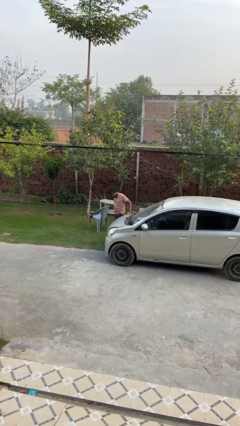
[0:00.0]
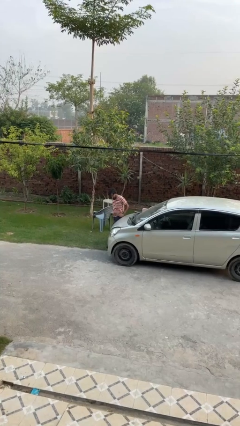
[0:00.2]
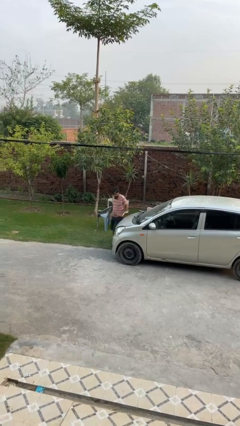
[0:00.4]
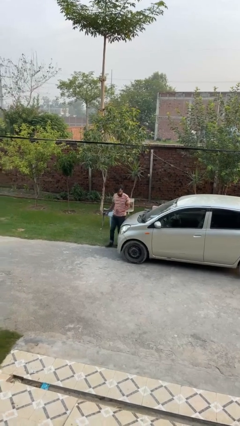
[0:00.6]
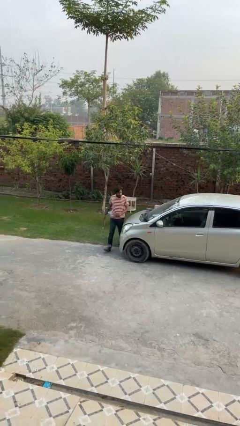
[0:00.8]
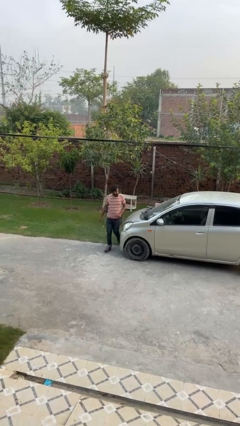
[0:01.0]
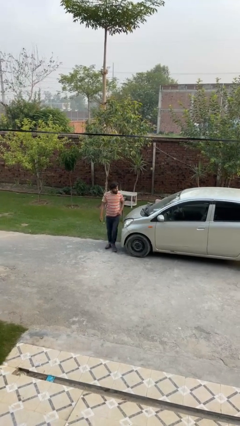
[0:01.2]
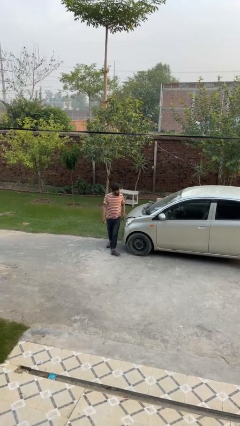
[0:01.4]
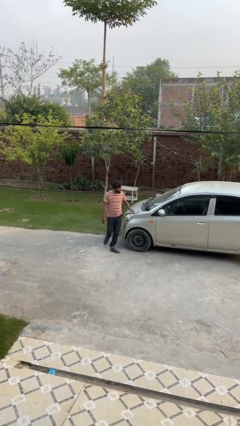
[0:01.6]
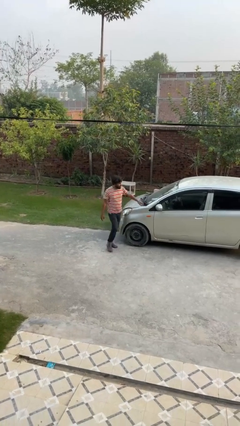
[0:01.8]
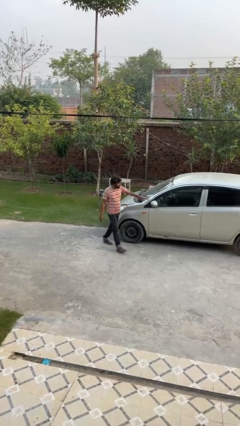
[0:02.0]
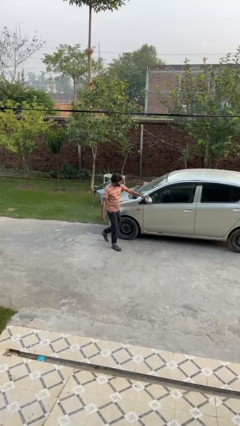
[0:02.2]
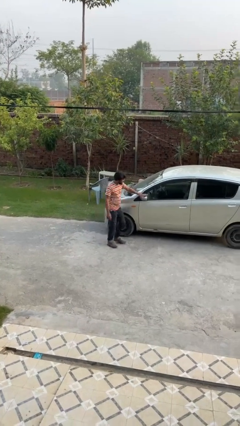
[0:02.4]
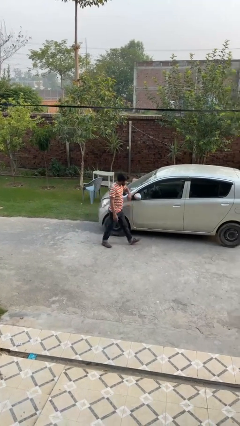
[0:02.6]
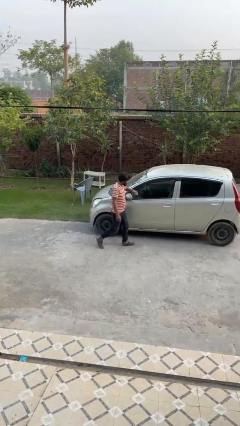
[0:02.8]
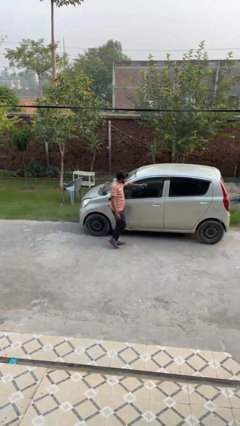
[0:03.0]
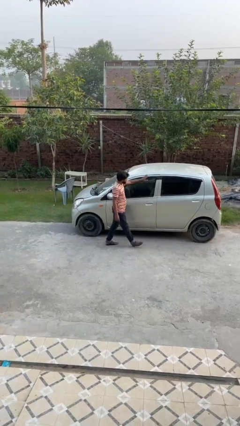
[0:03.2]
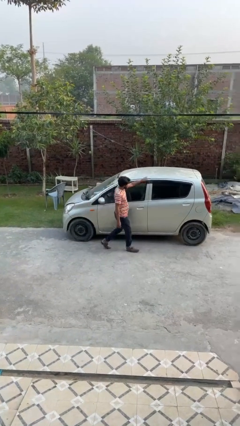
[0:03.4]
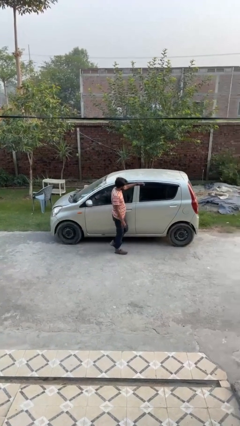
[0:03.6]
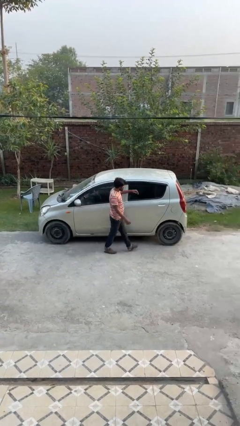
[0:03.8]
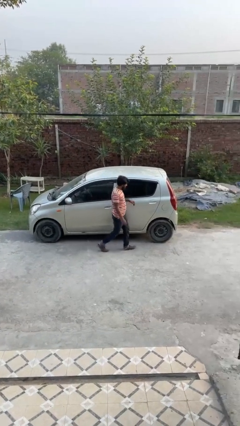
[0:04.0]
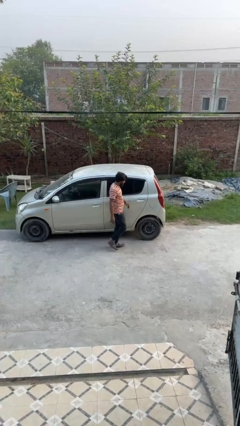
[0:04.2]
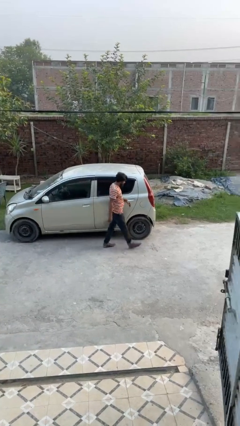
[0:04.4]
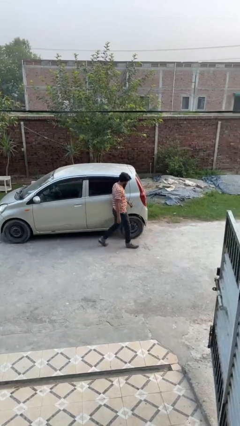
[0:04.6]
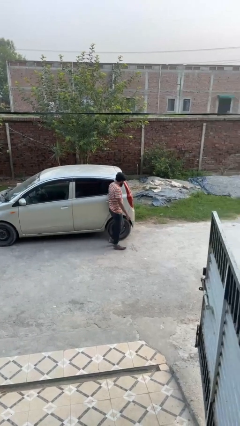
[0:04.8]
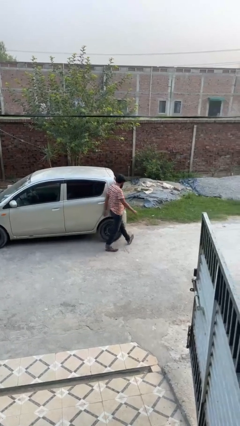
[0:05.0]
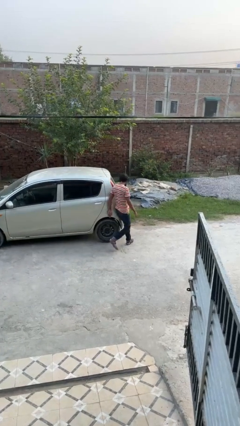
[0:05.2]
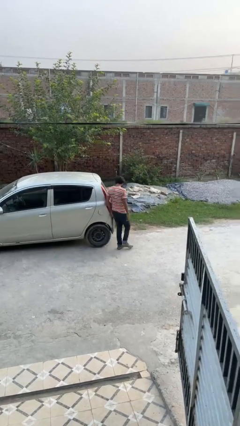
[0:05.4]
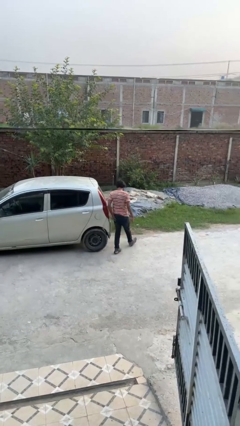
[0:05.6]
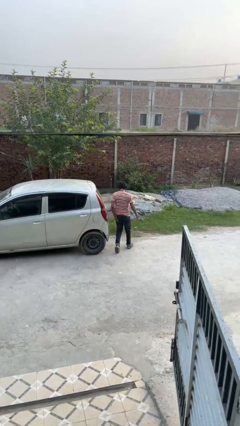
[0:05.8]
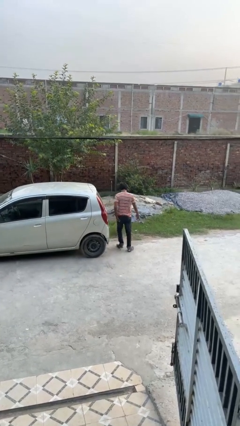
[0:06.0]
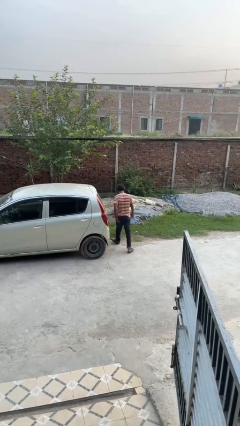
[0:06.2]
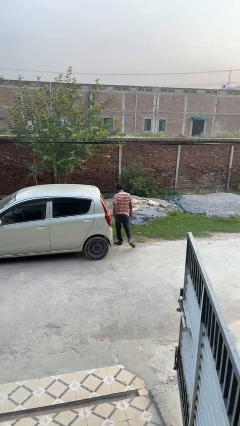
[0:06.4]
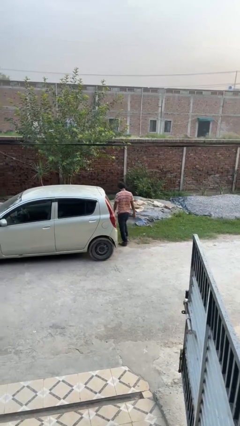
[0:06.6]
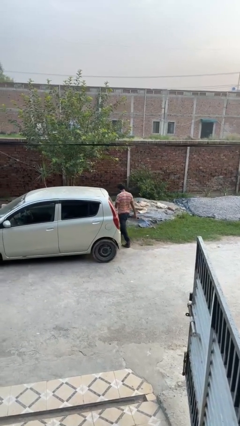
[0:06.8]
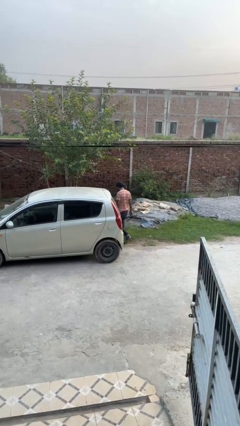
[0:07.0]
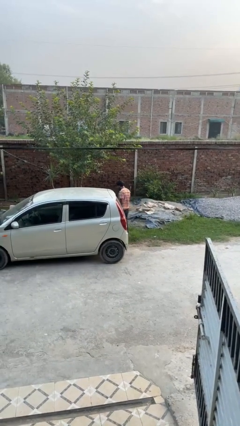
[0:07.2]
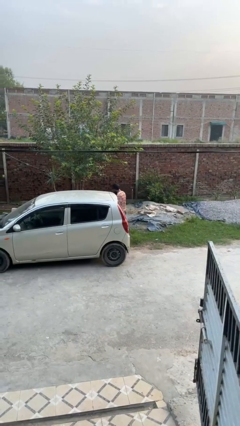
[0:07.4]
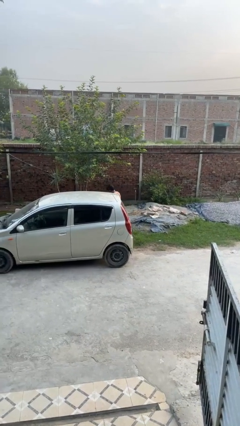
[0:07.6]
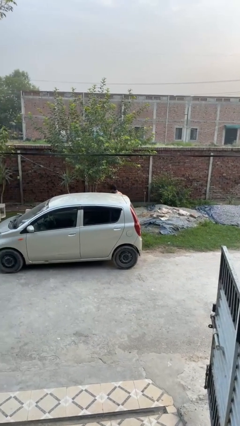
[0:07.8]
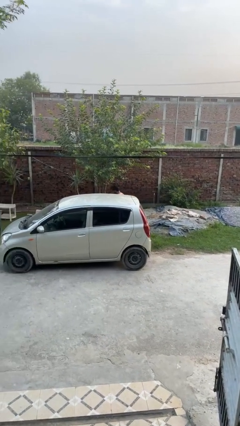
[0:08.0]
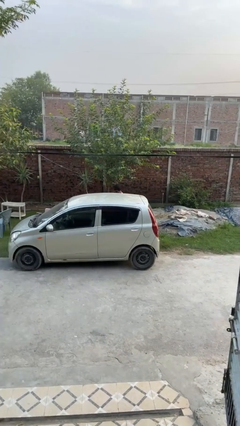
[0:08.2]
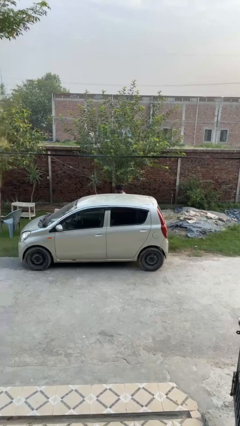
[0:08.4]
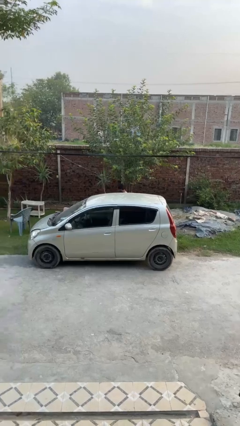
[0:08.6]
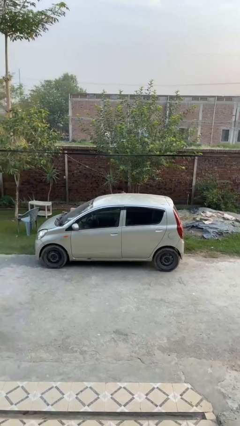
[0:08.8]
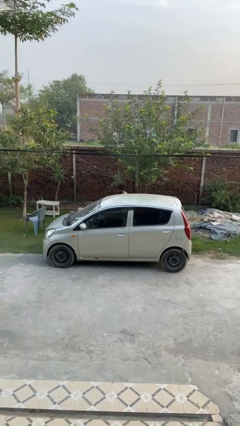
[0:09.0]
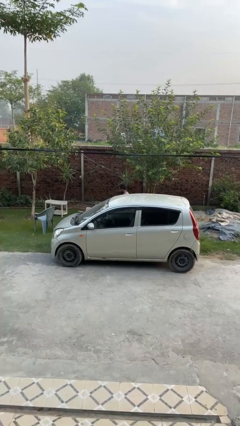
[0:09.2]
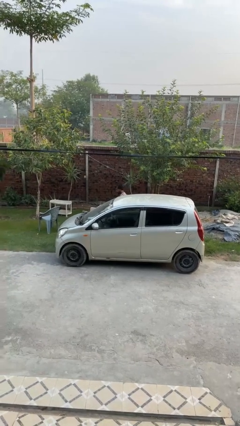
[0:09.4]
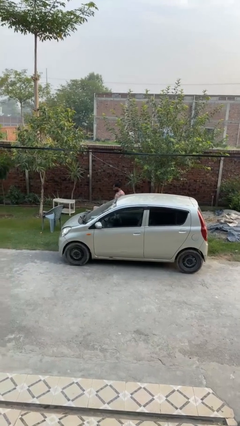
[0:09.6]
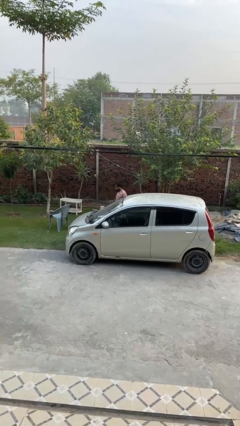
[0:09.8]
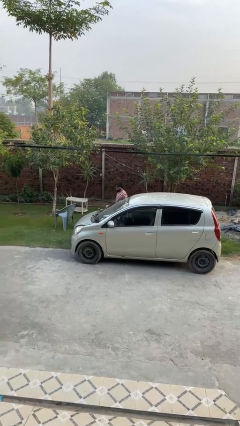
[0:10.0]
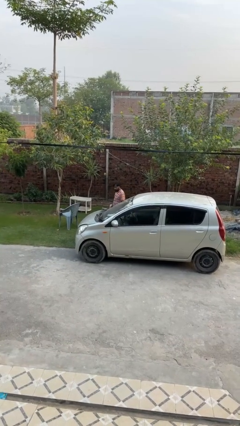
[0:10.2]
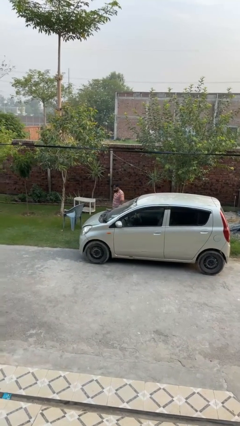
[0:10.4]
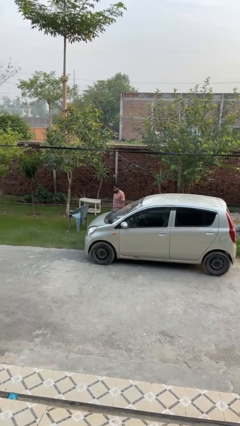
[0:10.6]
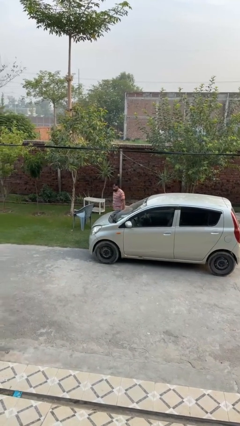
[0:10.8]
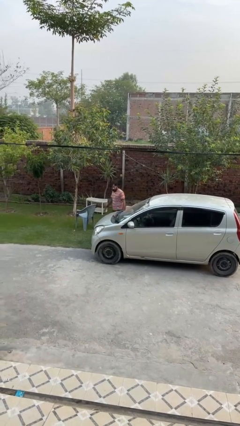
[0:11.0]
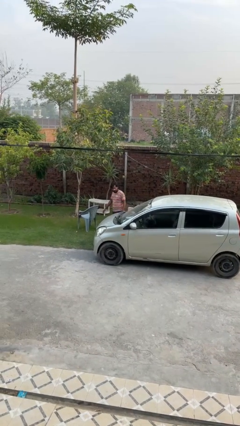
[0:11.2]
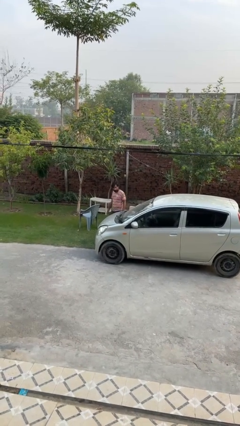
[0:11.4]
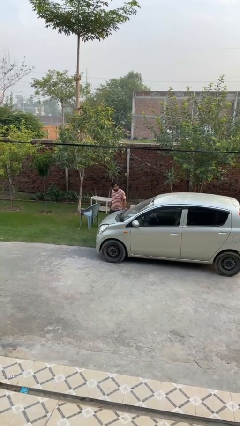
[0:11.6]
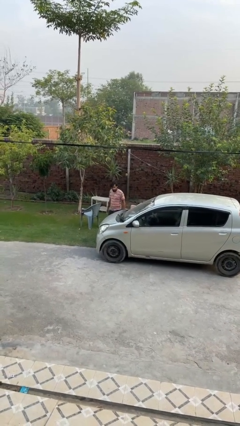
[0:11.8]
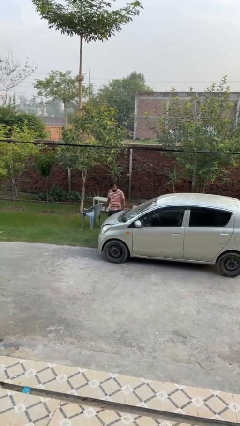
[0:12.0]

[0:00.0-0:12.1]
person walks around car

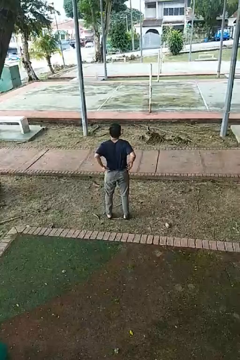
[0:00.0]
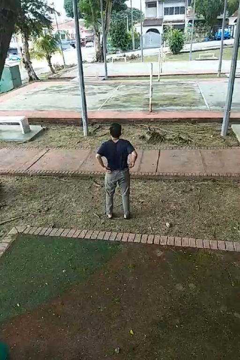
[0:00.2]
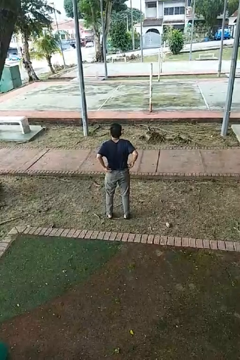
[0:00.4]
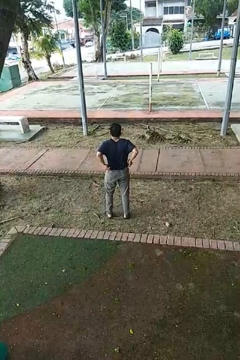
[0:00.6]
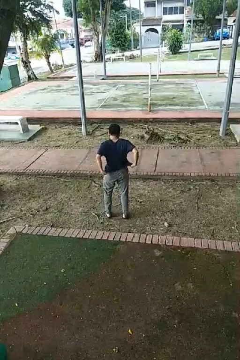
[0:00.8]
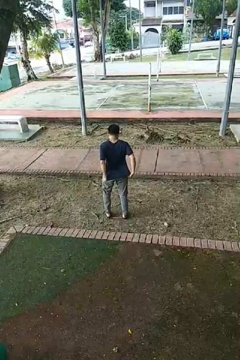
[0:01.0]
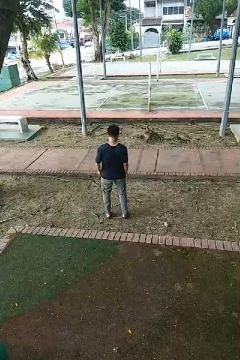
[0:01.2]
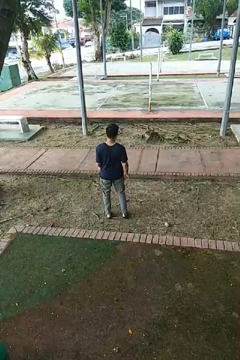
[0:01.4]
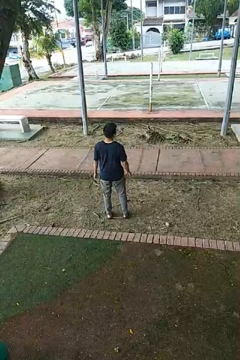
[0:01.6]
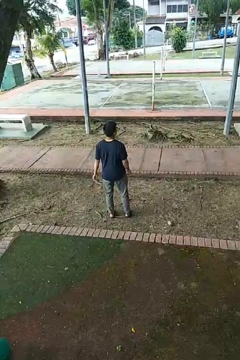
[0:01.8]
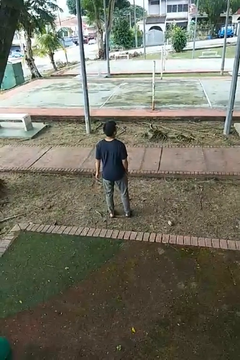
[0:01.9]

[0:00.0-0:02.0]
person untucks shirt

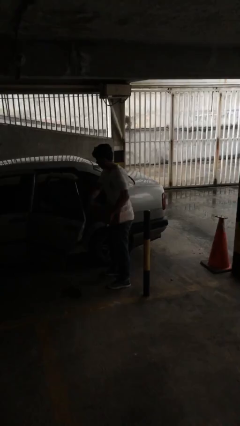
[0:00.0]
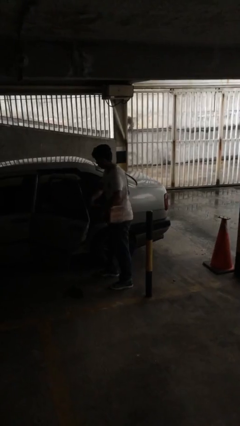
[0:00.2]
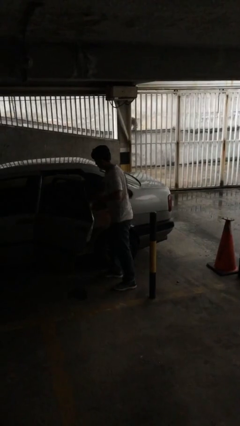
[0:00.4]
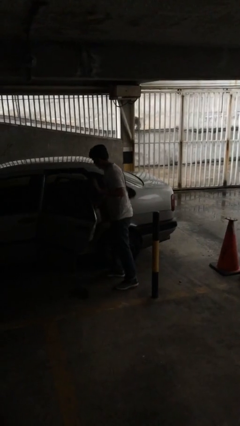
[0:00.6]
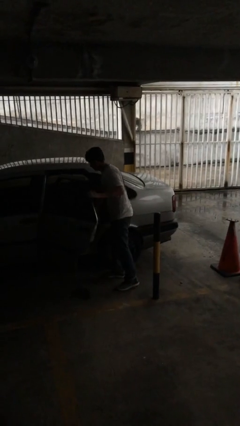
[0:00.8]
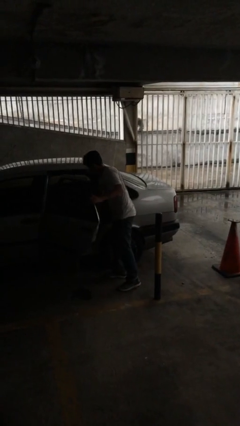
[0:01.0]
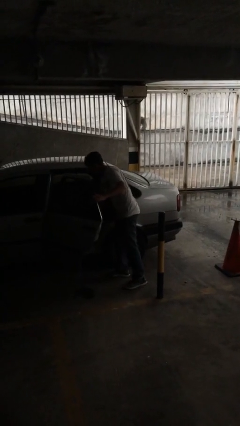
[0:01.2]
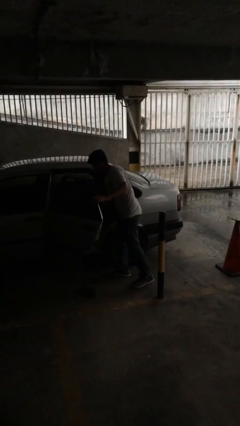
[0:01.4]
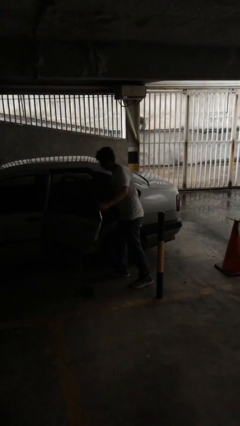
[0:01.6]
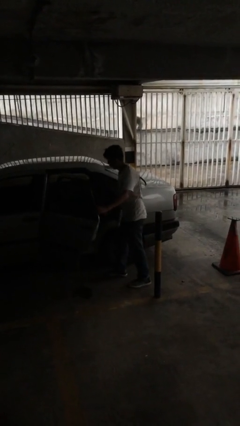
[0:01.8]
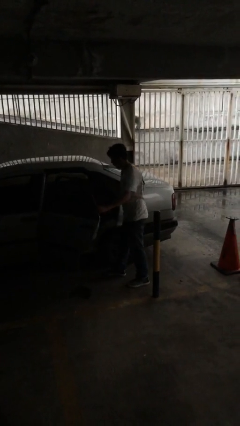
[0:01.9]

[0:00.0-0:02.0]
person loads car

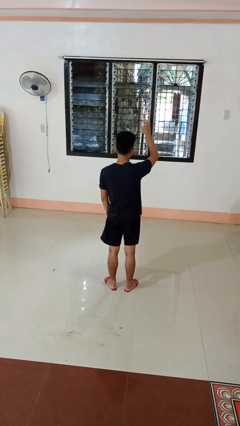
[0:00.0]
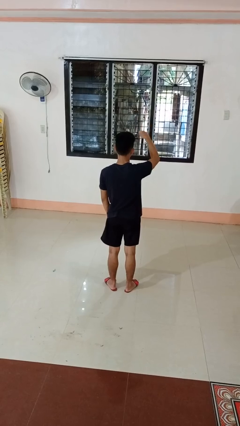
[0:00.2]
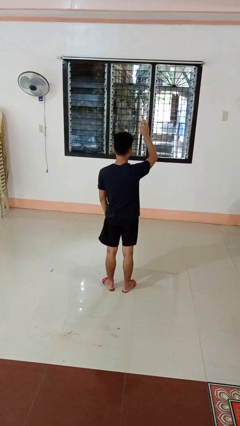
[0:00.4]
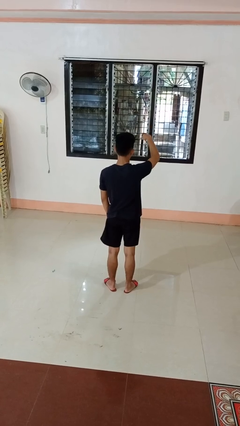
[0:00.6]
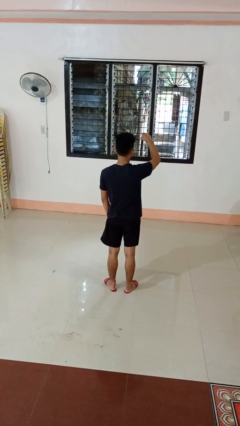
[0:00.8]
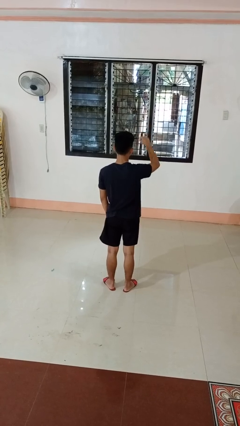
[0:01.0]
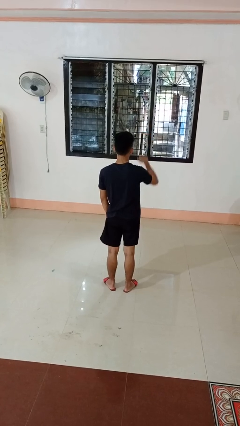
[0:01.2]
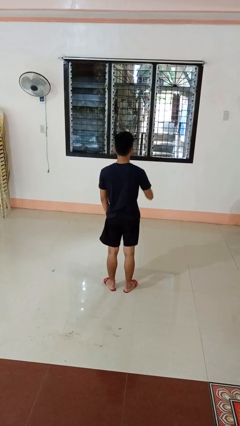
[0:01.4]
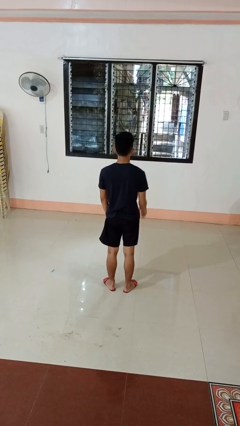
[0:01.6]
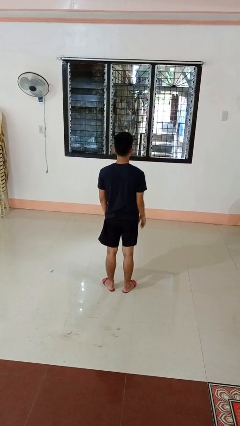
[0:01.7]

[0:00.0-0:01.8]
person gestures come here

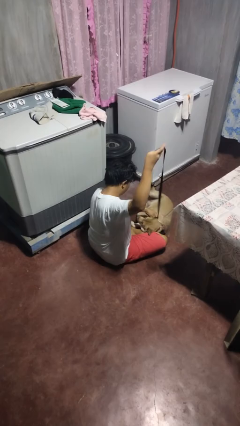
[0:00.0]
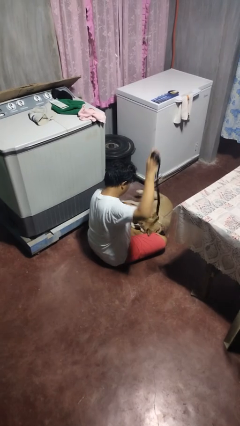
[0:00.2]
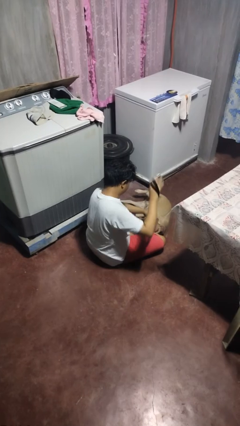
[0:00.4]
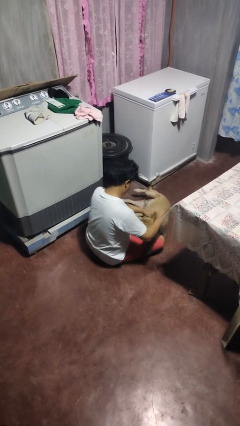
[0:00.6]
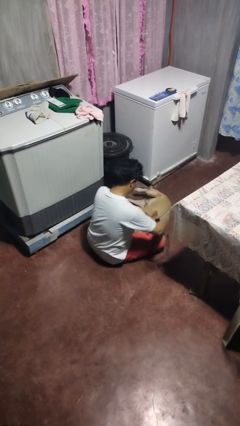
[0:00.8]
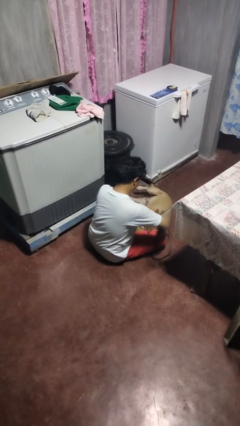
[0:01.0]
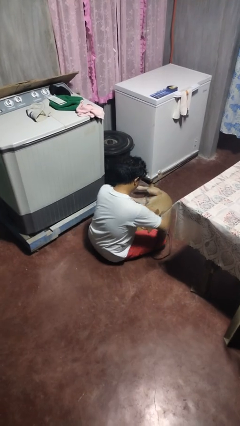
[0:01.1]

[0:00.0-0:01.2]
person unattaches leash from dog
